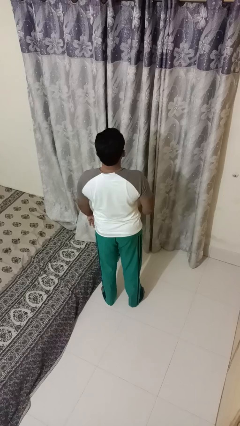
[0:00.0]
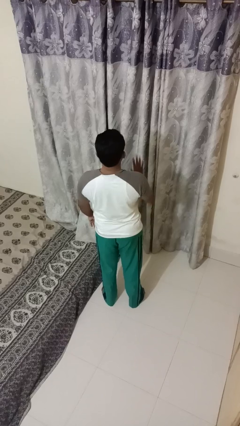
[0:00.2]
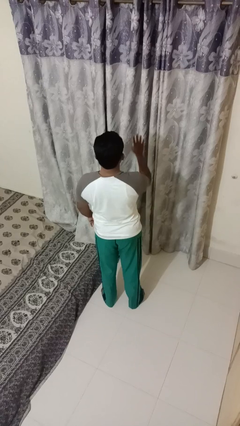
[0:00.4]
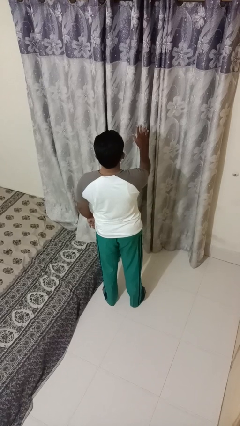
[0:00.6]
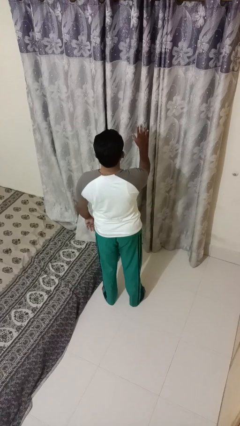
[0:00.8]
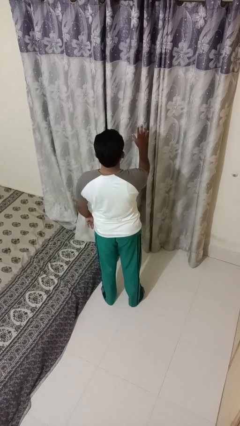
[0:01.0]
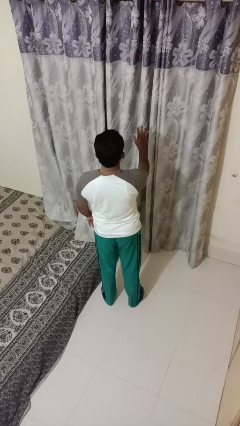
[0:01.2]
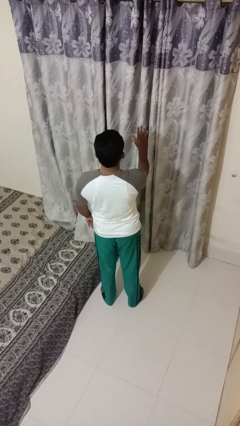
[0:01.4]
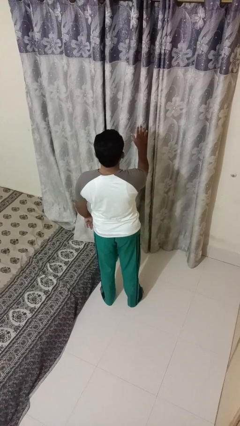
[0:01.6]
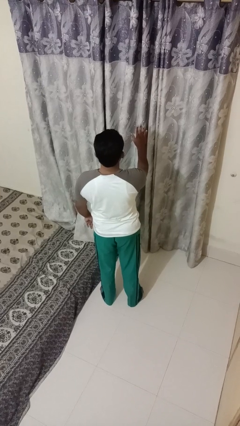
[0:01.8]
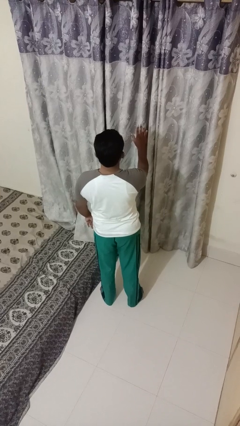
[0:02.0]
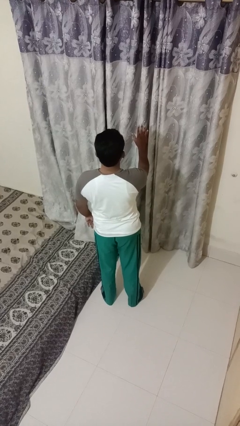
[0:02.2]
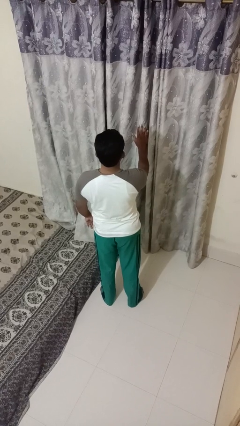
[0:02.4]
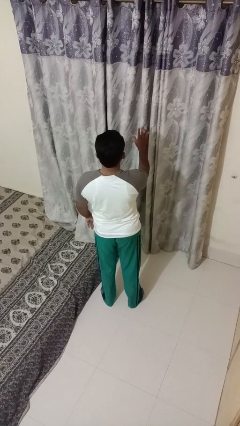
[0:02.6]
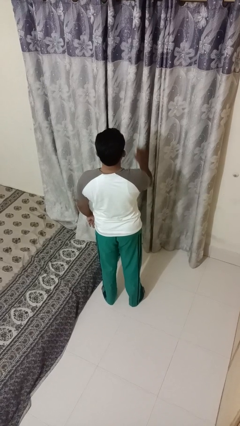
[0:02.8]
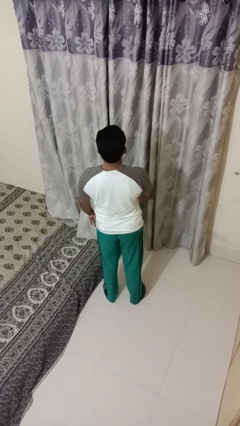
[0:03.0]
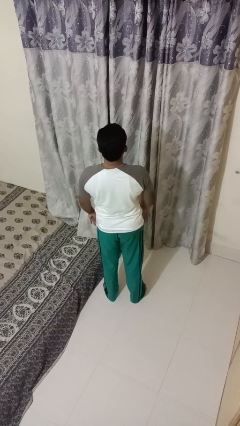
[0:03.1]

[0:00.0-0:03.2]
person gestures stop

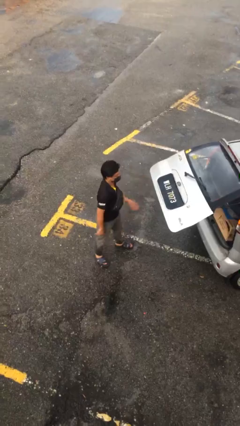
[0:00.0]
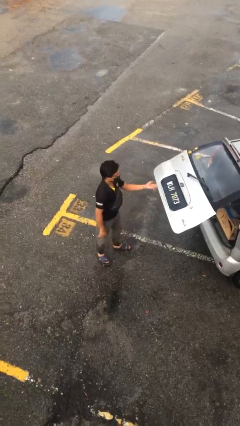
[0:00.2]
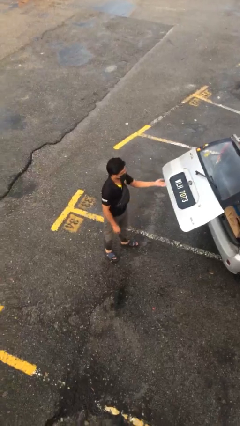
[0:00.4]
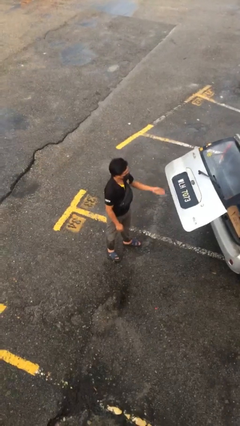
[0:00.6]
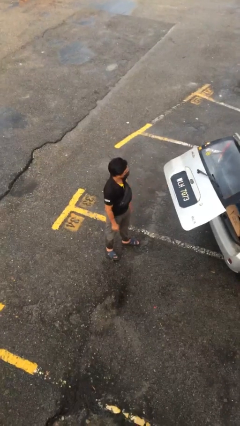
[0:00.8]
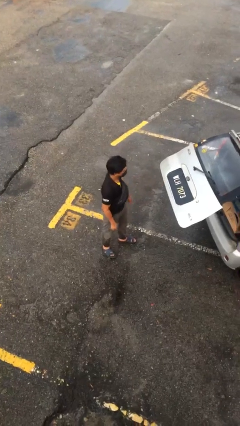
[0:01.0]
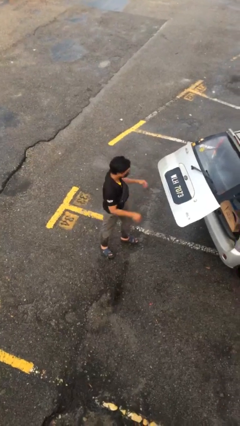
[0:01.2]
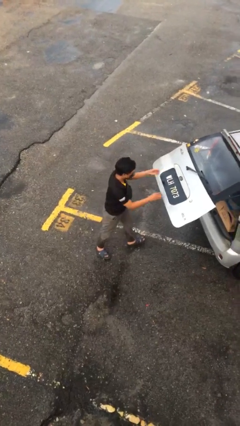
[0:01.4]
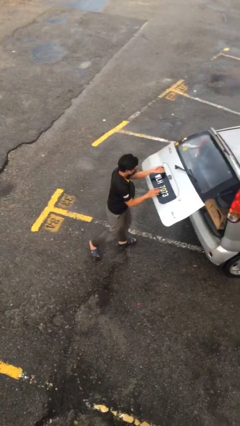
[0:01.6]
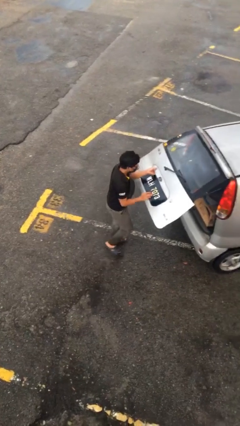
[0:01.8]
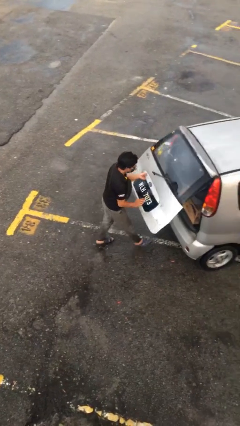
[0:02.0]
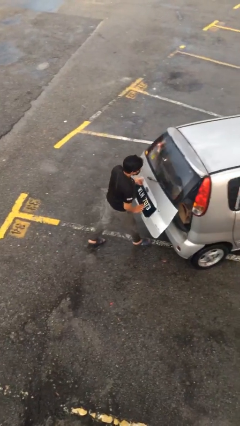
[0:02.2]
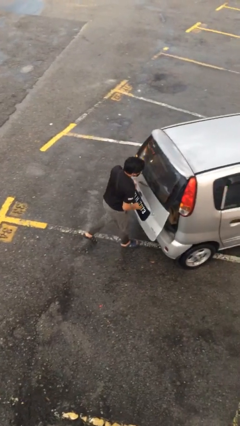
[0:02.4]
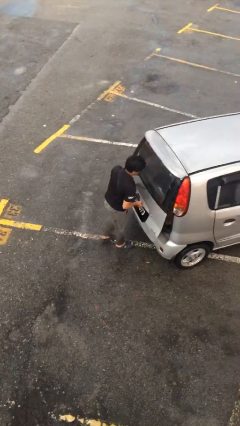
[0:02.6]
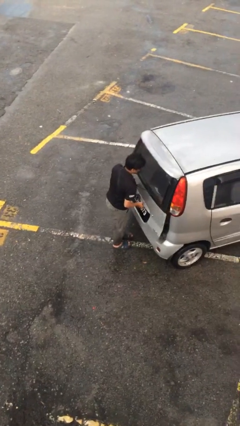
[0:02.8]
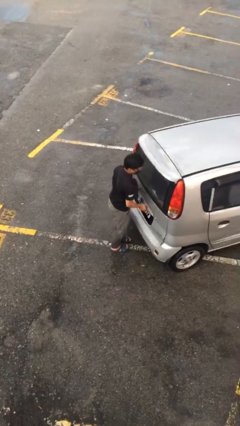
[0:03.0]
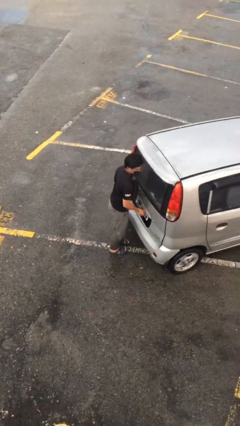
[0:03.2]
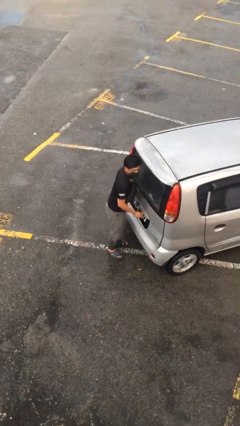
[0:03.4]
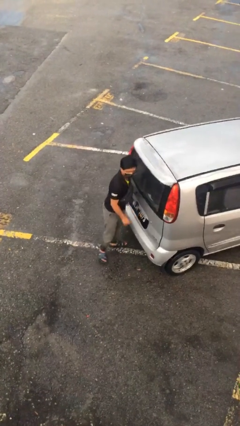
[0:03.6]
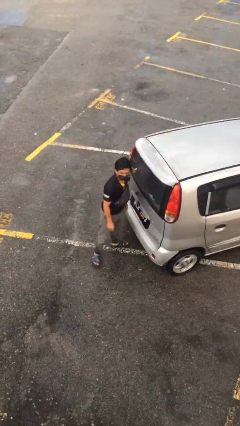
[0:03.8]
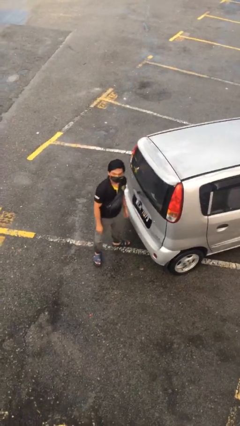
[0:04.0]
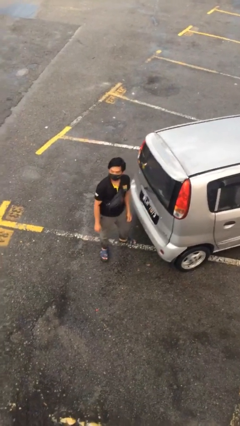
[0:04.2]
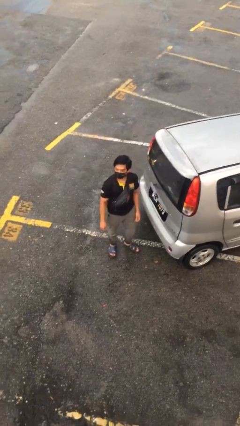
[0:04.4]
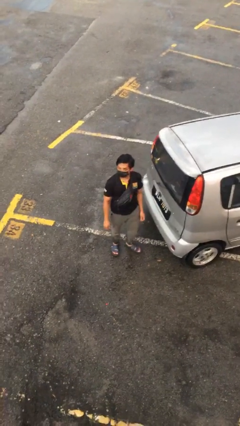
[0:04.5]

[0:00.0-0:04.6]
person closes car trunk

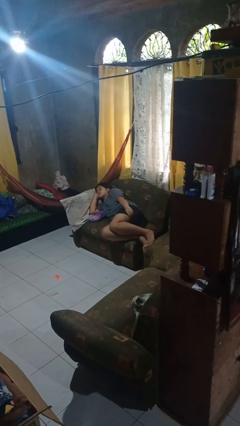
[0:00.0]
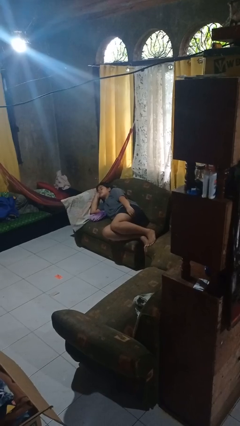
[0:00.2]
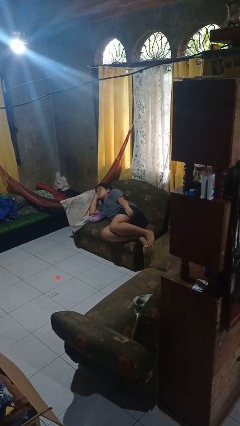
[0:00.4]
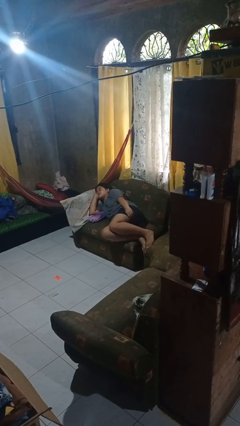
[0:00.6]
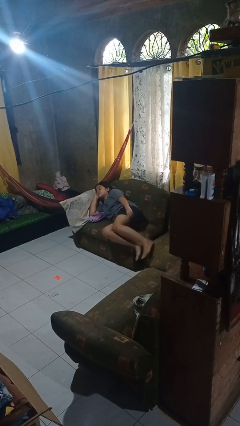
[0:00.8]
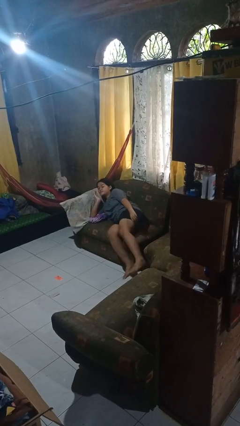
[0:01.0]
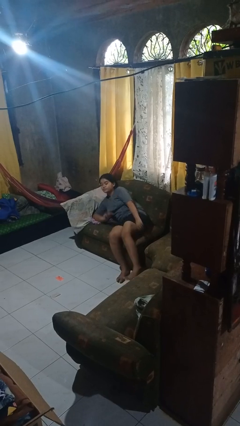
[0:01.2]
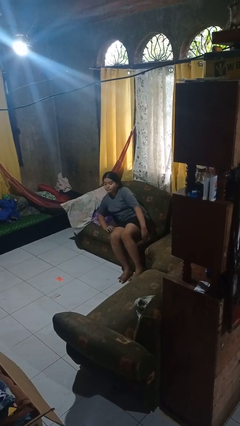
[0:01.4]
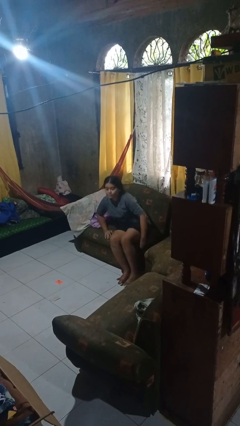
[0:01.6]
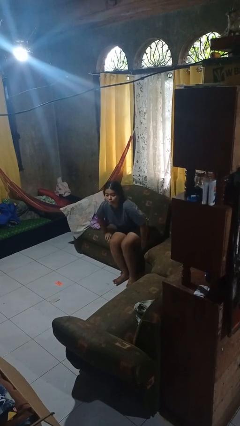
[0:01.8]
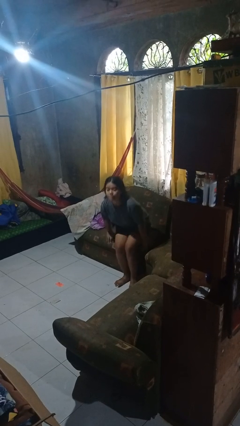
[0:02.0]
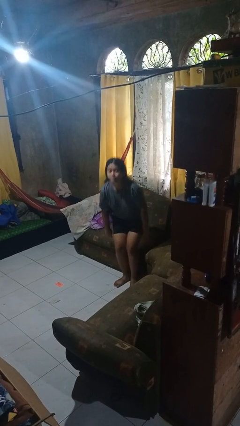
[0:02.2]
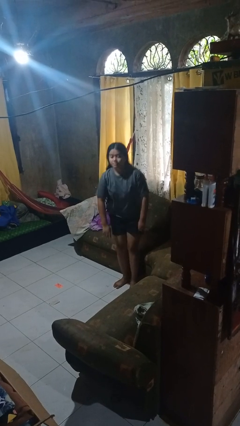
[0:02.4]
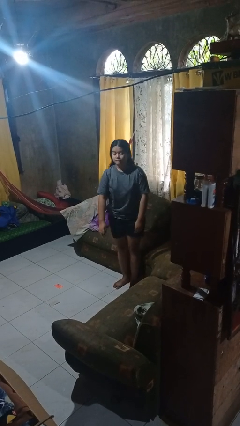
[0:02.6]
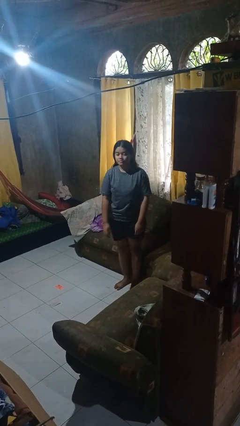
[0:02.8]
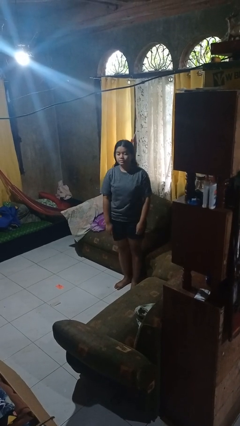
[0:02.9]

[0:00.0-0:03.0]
person stands up

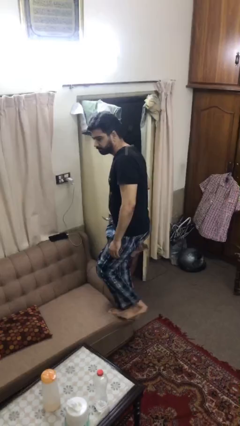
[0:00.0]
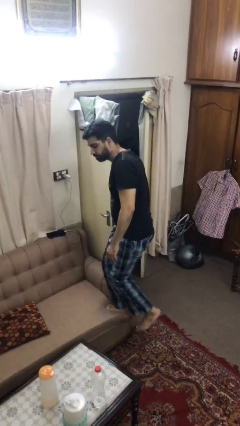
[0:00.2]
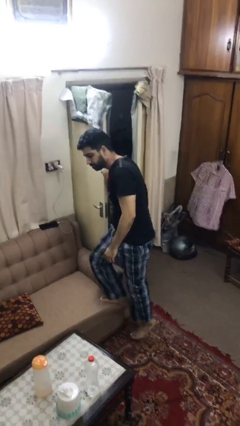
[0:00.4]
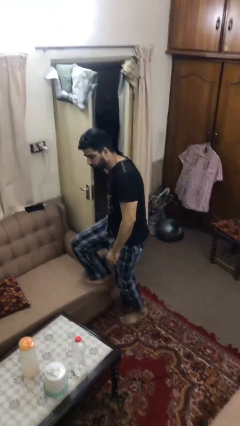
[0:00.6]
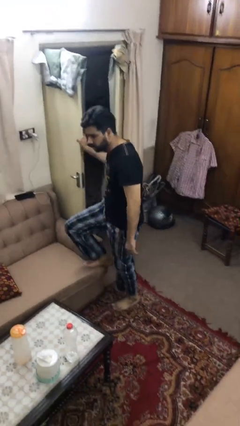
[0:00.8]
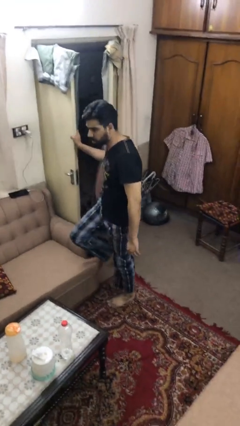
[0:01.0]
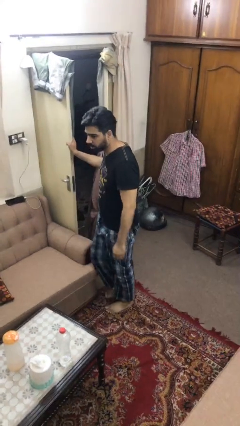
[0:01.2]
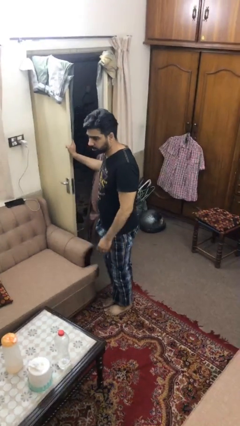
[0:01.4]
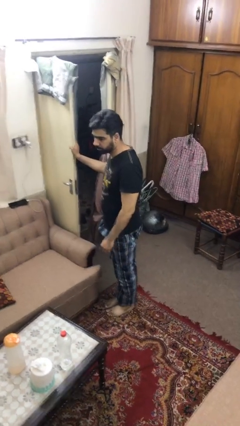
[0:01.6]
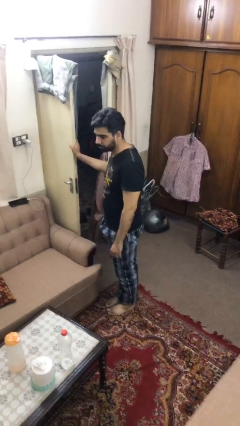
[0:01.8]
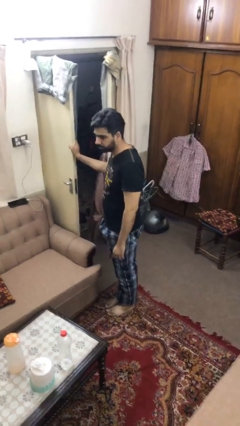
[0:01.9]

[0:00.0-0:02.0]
person climbs off couch

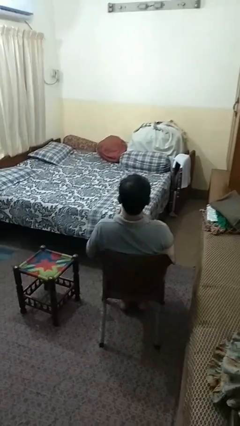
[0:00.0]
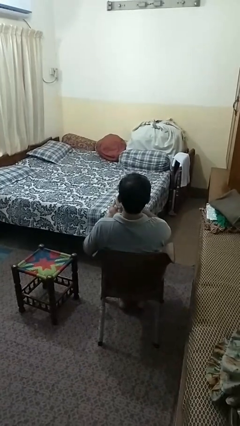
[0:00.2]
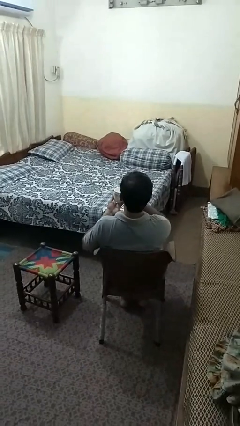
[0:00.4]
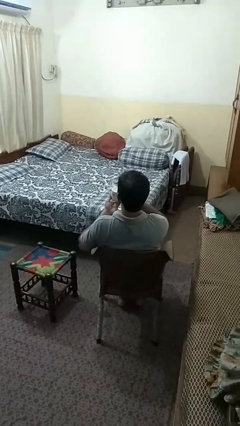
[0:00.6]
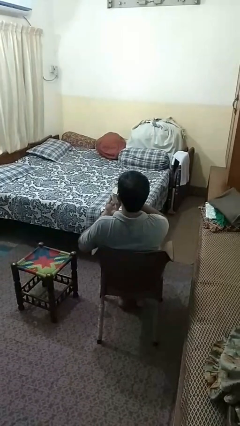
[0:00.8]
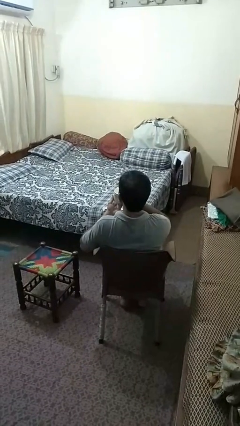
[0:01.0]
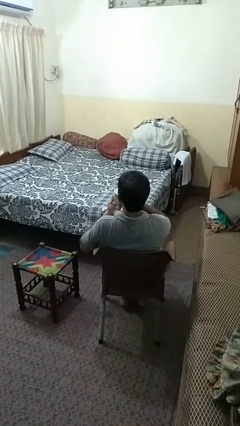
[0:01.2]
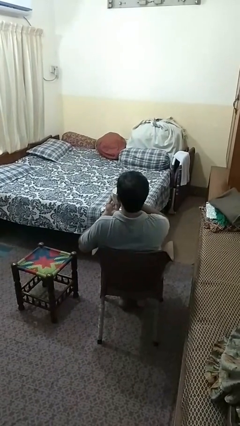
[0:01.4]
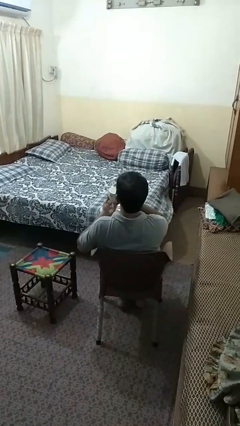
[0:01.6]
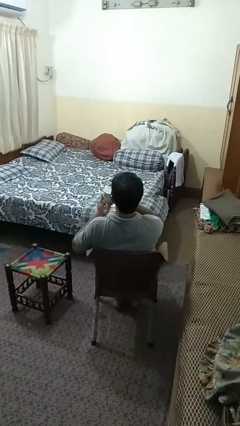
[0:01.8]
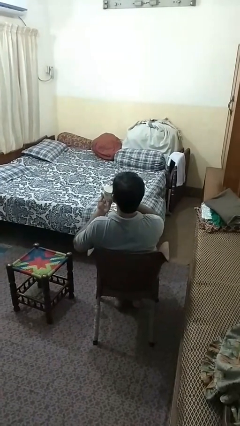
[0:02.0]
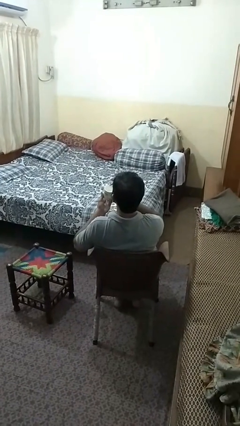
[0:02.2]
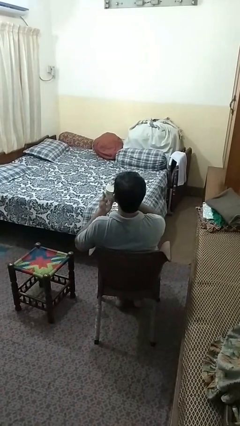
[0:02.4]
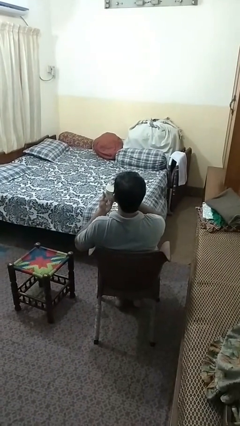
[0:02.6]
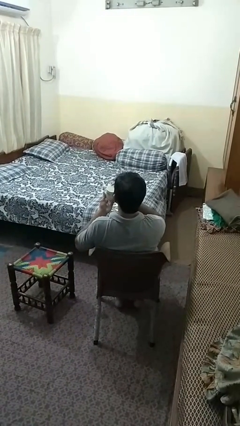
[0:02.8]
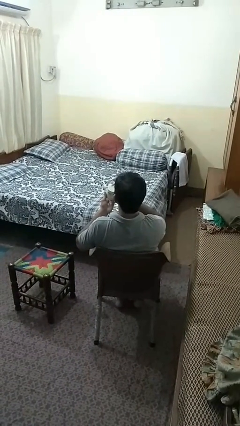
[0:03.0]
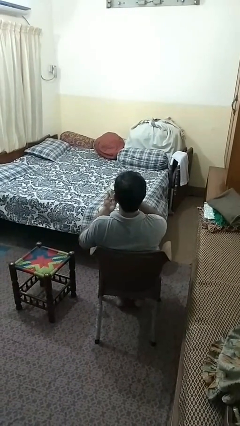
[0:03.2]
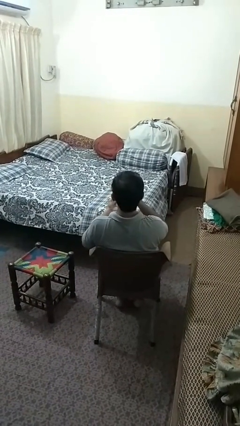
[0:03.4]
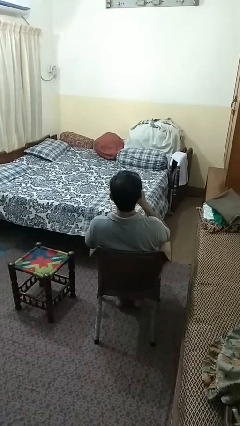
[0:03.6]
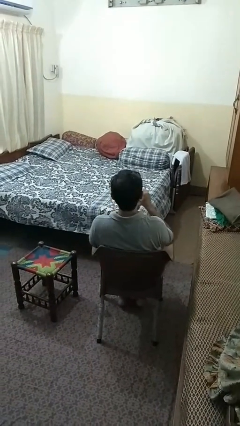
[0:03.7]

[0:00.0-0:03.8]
person drinks from straw

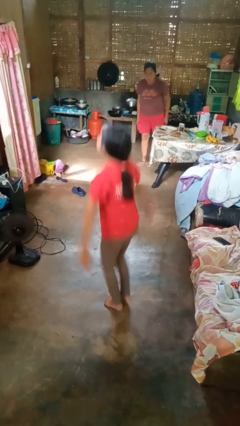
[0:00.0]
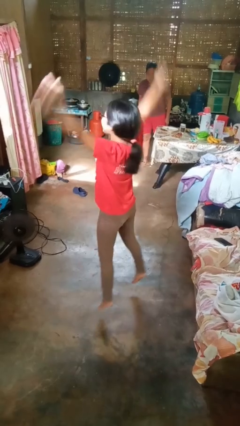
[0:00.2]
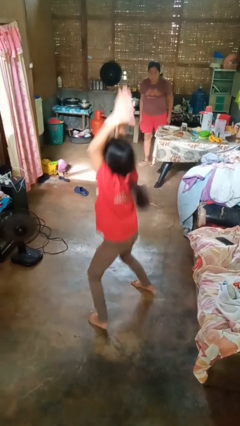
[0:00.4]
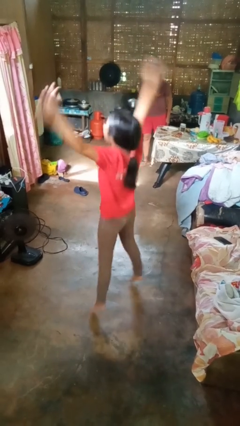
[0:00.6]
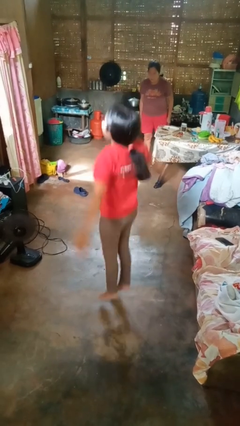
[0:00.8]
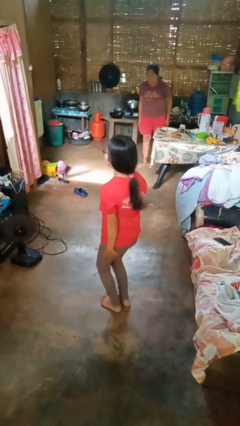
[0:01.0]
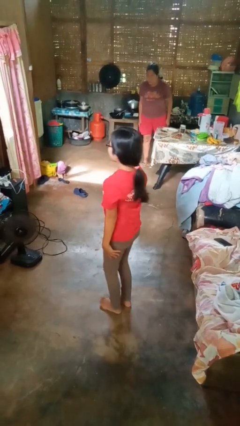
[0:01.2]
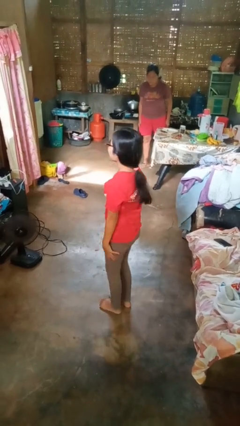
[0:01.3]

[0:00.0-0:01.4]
person exercises with jumping jacks
